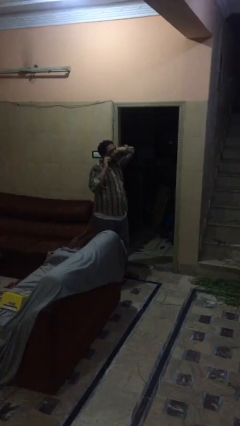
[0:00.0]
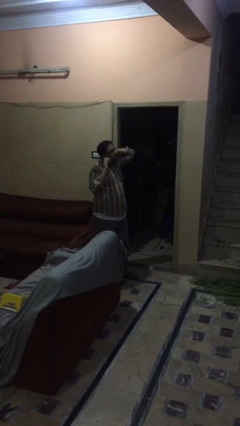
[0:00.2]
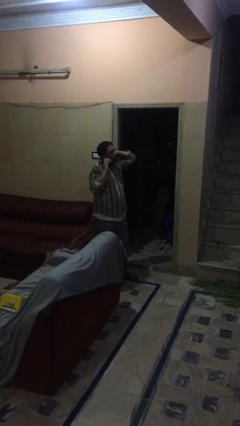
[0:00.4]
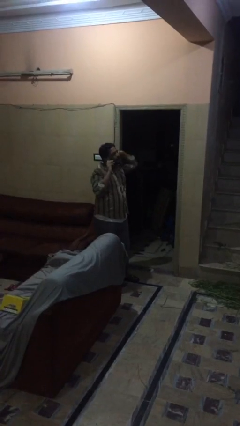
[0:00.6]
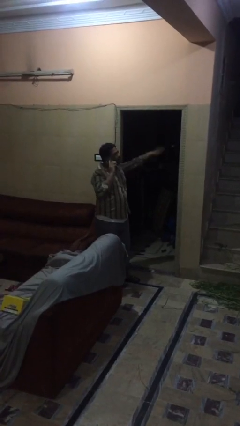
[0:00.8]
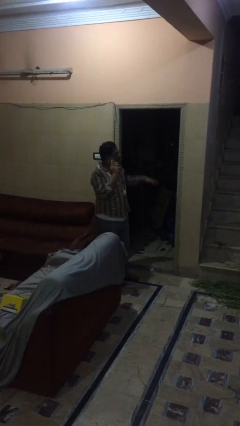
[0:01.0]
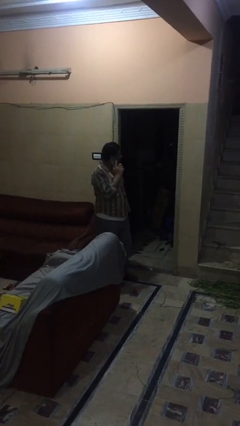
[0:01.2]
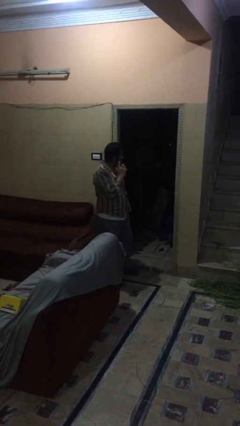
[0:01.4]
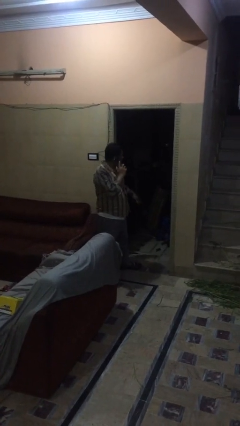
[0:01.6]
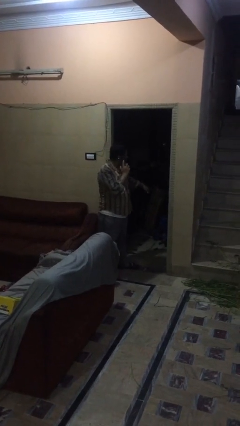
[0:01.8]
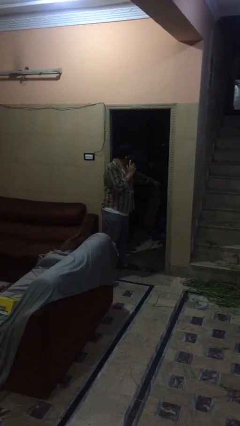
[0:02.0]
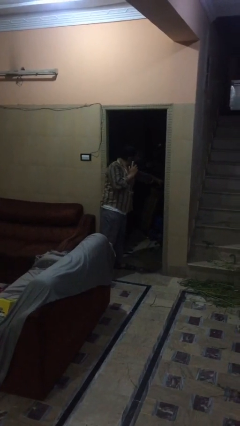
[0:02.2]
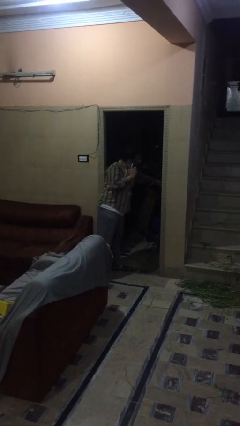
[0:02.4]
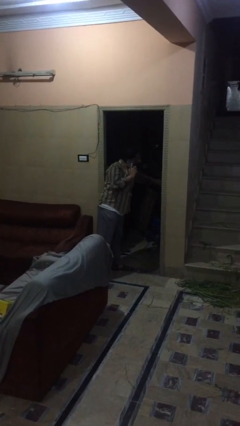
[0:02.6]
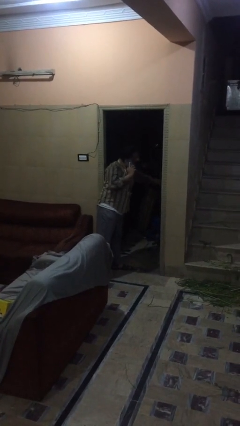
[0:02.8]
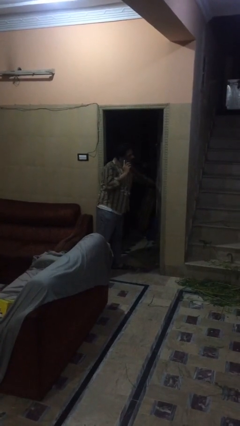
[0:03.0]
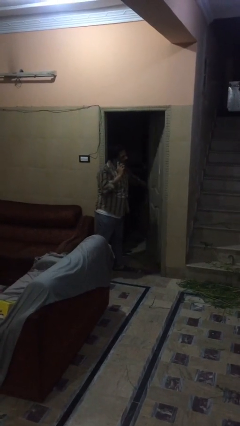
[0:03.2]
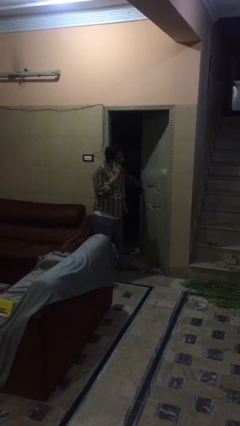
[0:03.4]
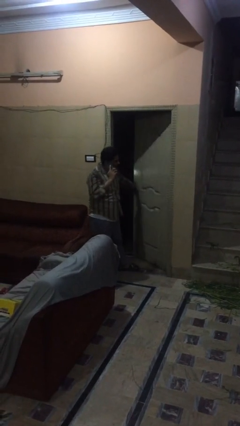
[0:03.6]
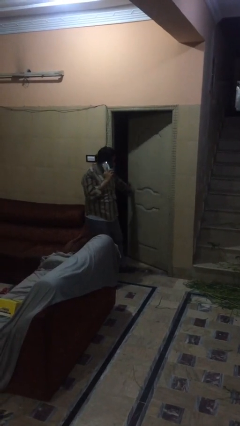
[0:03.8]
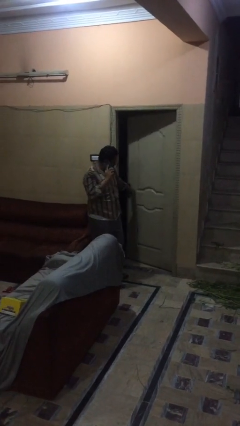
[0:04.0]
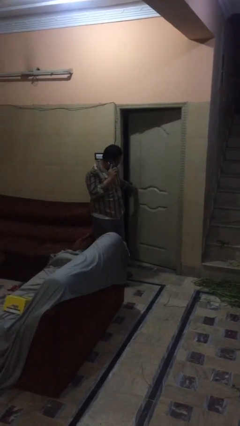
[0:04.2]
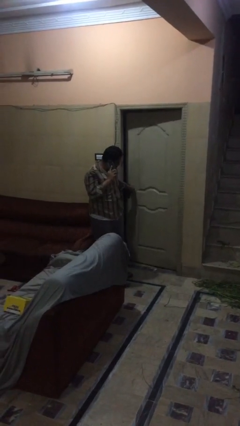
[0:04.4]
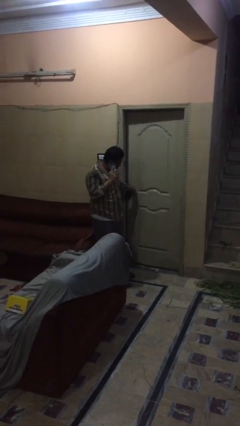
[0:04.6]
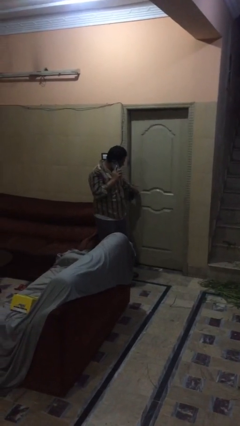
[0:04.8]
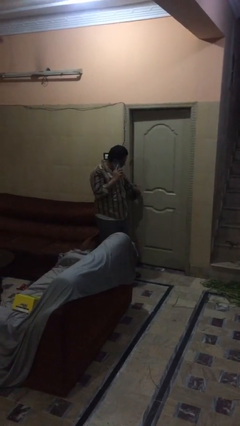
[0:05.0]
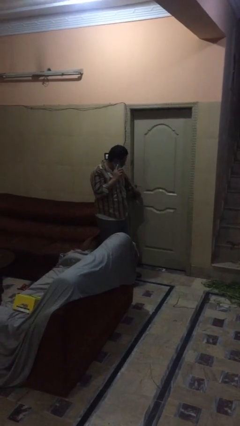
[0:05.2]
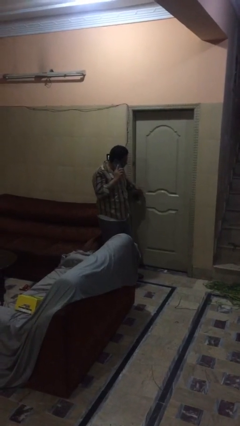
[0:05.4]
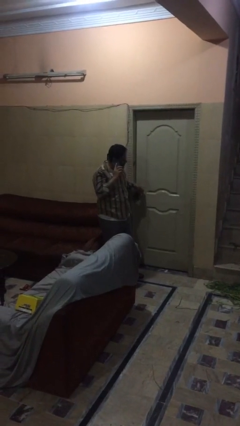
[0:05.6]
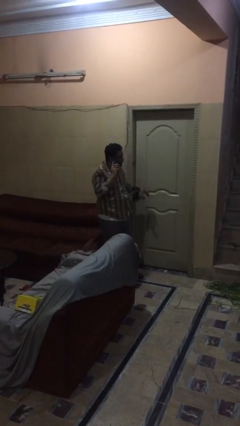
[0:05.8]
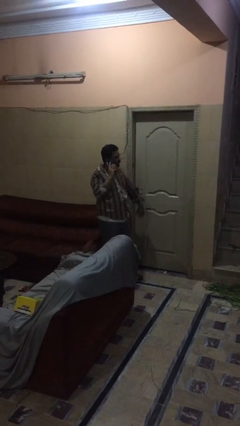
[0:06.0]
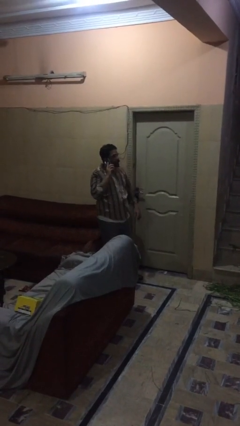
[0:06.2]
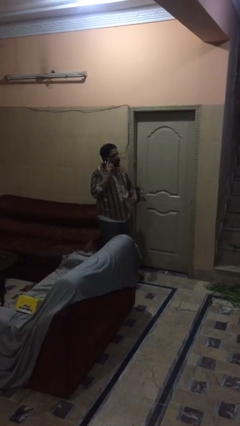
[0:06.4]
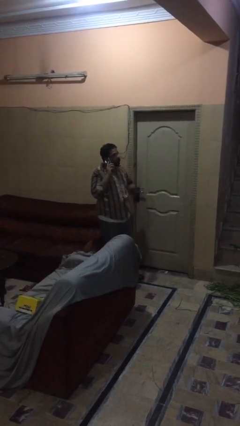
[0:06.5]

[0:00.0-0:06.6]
person closes facility door

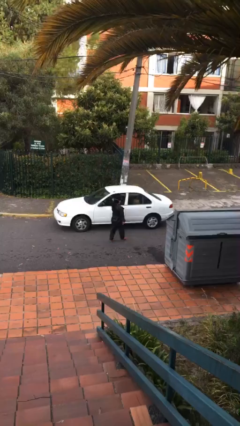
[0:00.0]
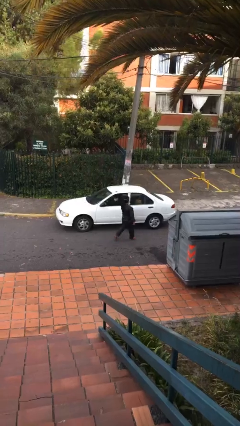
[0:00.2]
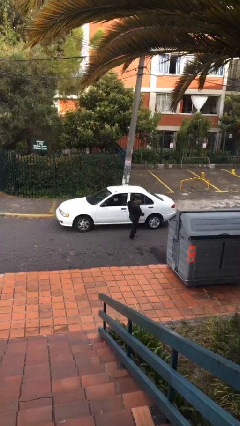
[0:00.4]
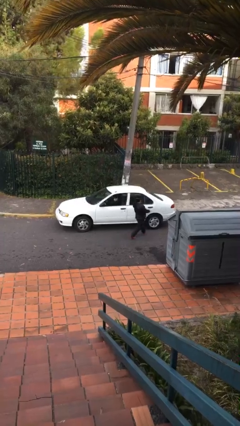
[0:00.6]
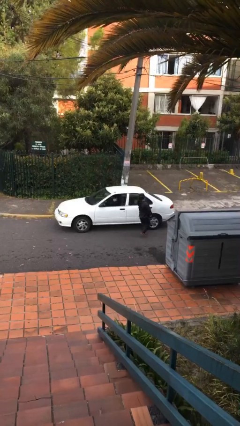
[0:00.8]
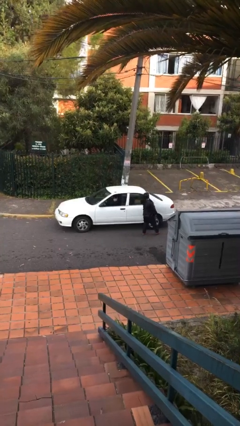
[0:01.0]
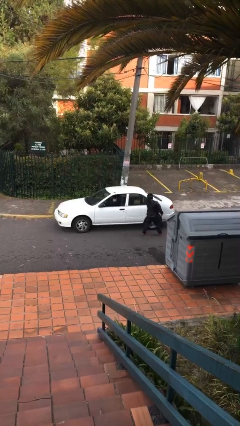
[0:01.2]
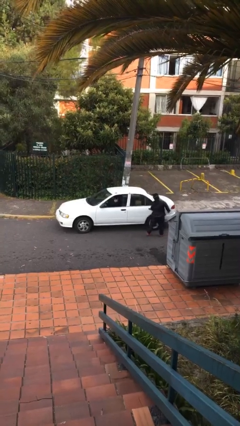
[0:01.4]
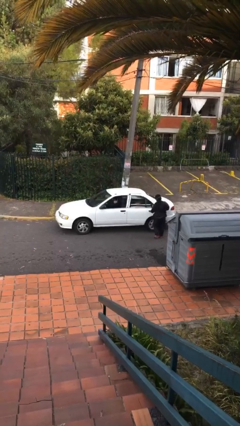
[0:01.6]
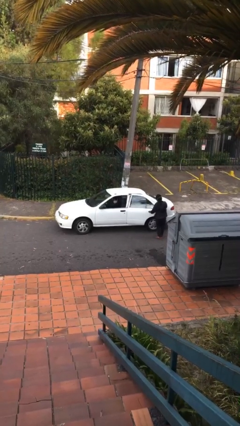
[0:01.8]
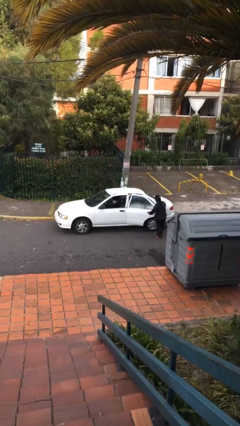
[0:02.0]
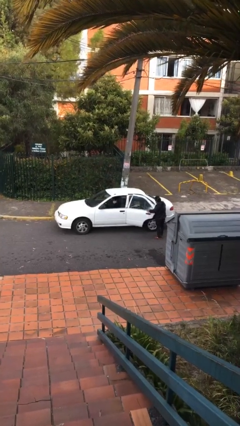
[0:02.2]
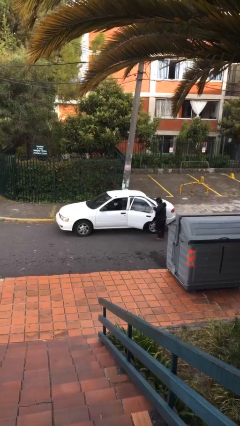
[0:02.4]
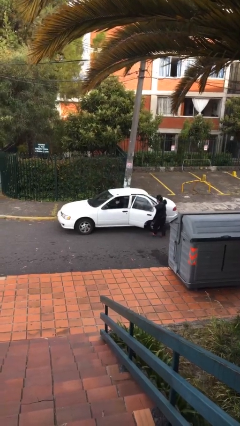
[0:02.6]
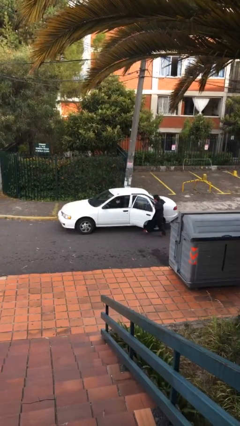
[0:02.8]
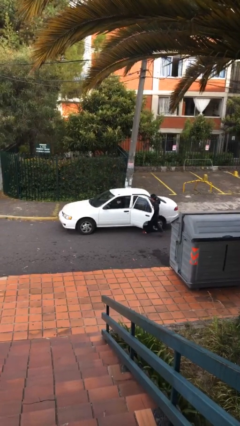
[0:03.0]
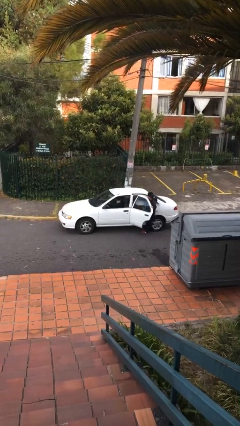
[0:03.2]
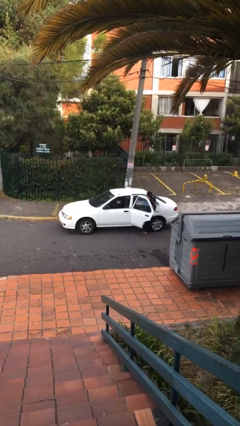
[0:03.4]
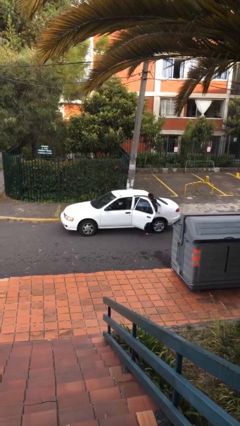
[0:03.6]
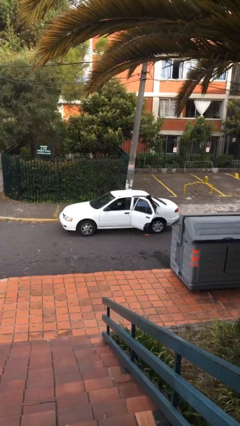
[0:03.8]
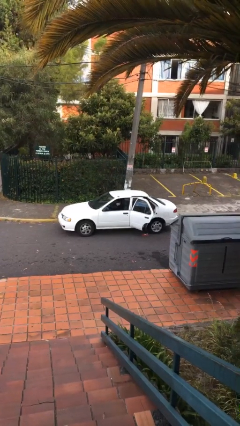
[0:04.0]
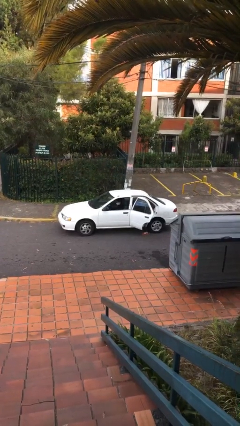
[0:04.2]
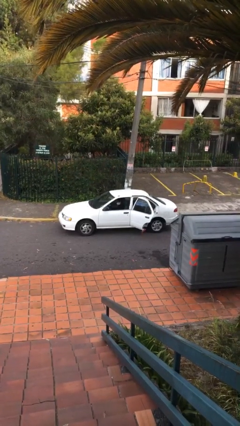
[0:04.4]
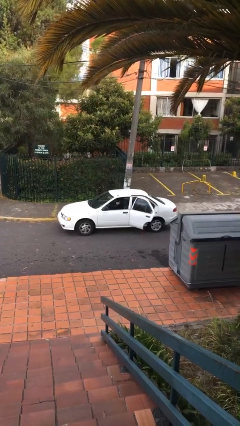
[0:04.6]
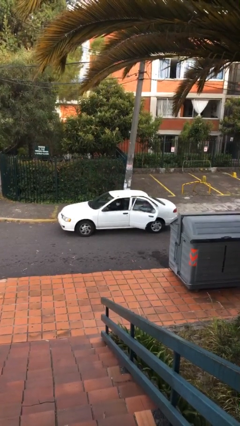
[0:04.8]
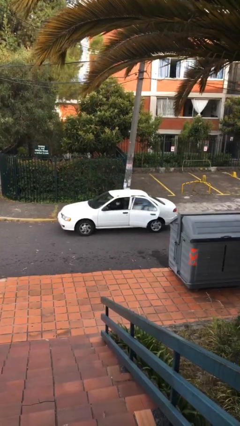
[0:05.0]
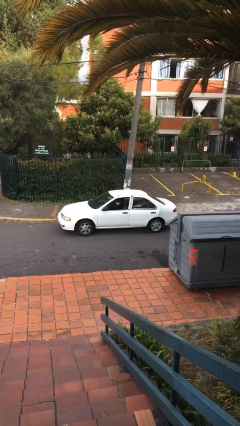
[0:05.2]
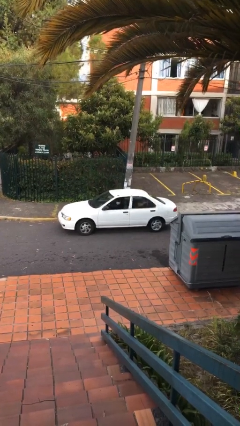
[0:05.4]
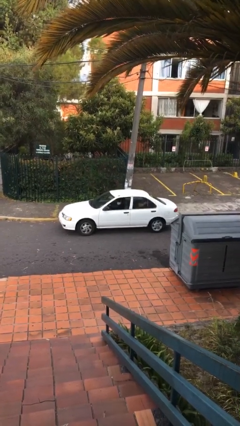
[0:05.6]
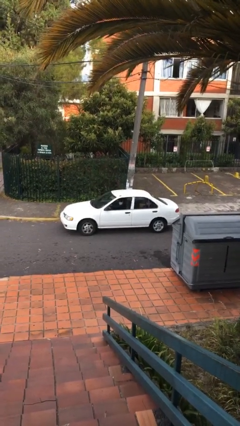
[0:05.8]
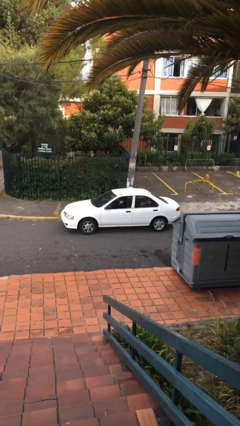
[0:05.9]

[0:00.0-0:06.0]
car picks up person

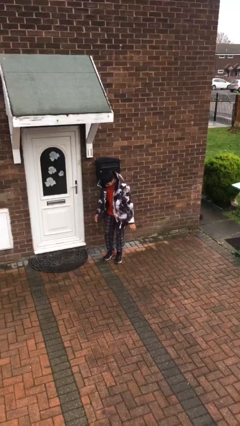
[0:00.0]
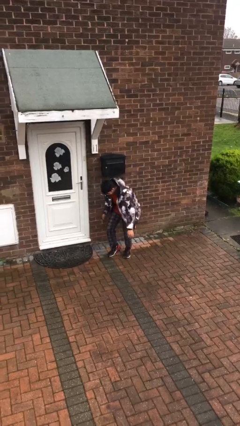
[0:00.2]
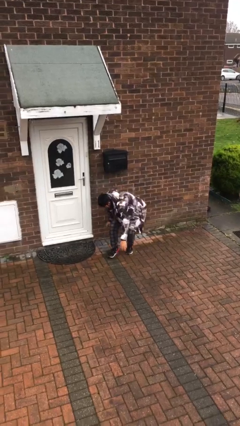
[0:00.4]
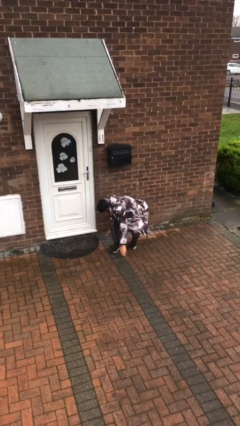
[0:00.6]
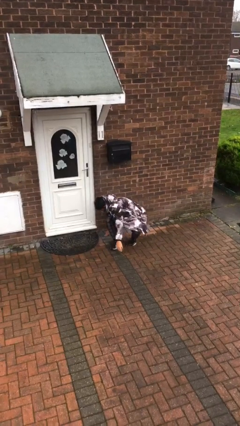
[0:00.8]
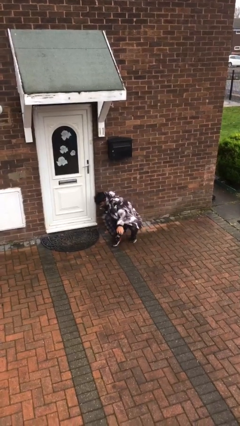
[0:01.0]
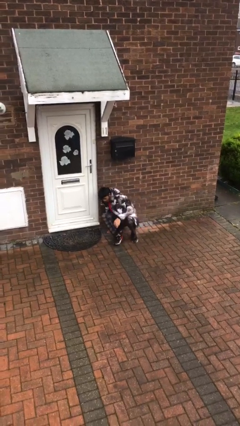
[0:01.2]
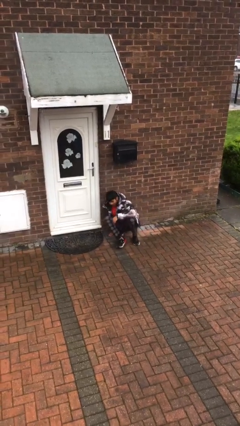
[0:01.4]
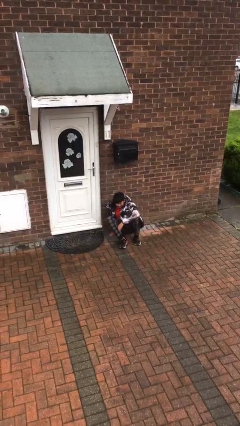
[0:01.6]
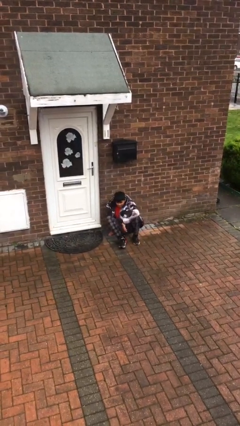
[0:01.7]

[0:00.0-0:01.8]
person sits down

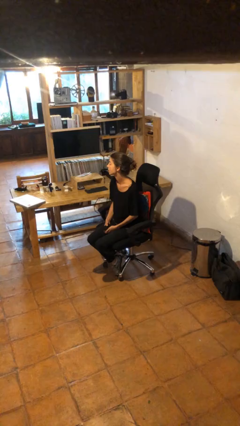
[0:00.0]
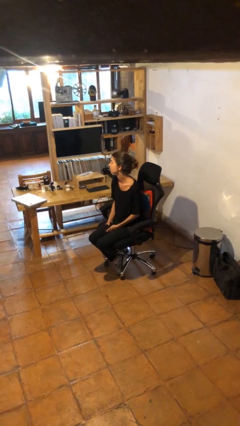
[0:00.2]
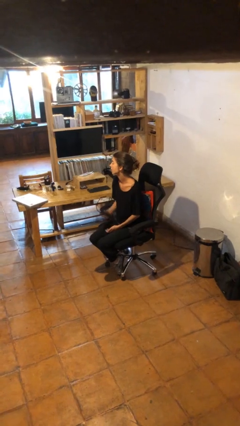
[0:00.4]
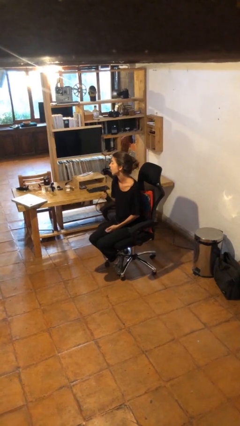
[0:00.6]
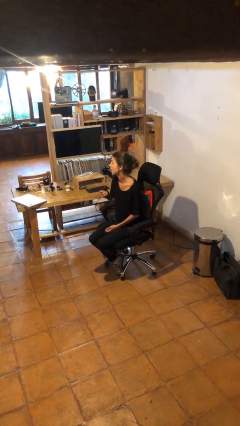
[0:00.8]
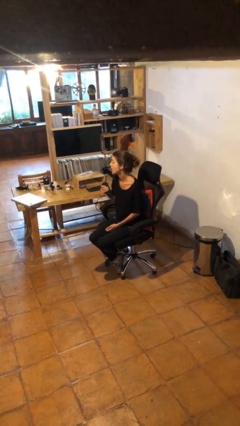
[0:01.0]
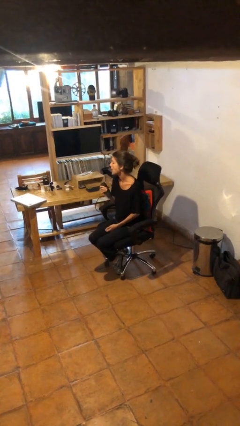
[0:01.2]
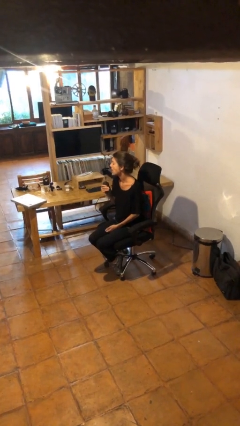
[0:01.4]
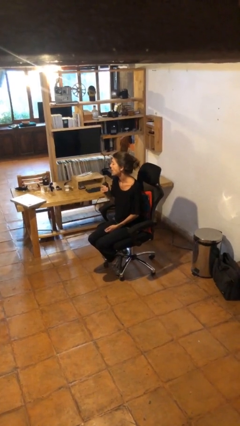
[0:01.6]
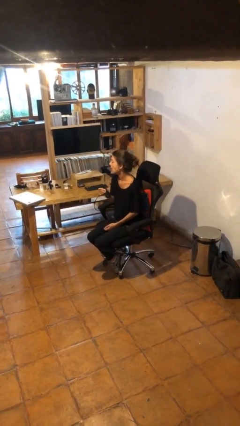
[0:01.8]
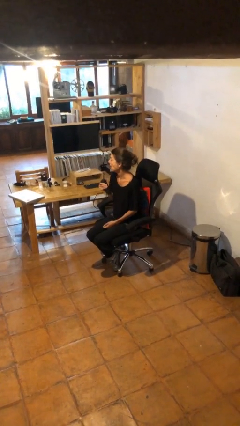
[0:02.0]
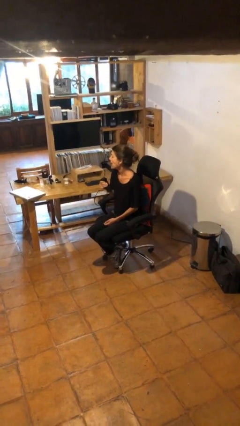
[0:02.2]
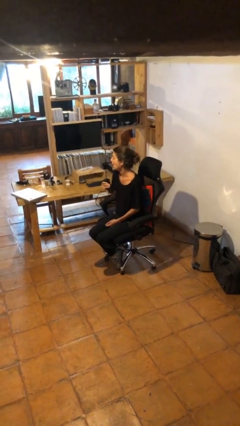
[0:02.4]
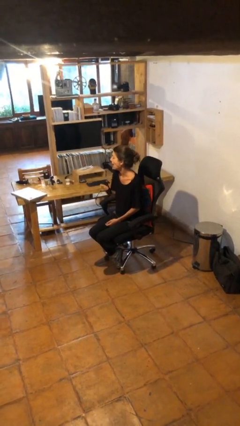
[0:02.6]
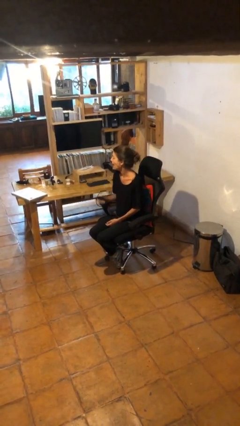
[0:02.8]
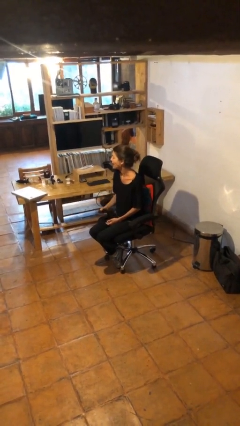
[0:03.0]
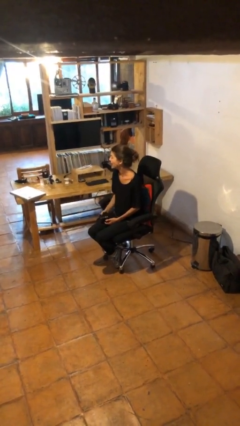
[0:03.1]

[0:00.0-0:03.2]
person squeezes object
